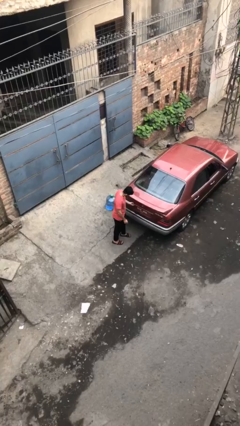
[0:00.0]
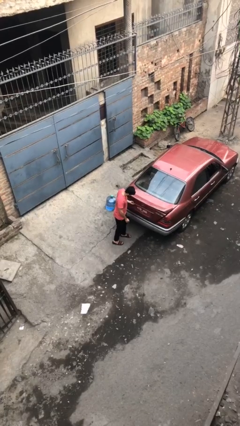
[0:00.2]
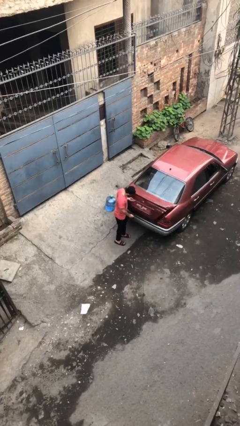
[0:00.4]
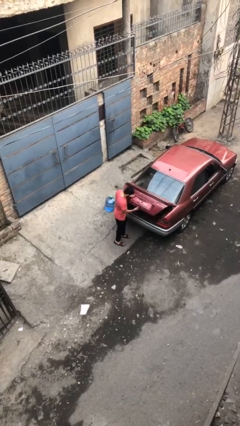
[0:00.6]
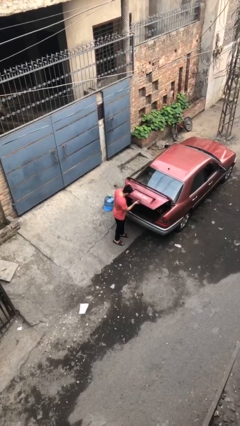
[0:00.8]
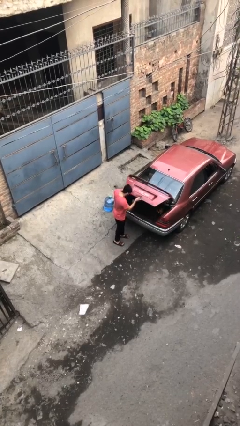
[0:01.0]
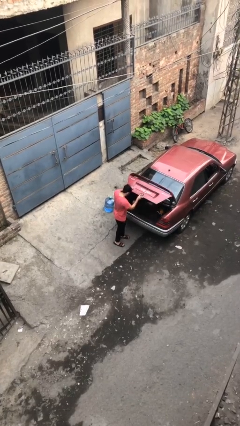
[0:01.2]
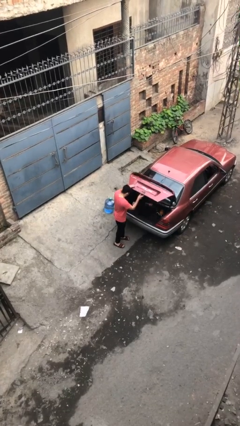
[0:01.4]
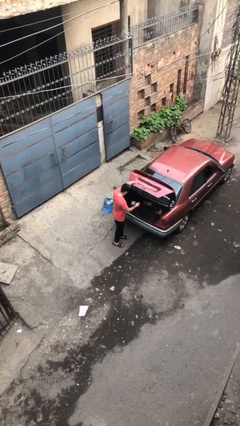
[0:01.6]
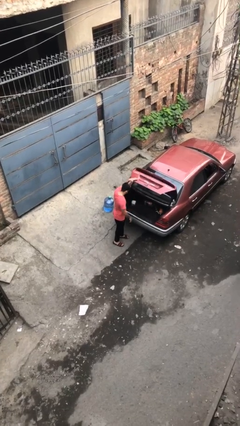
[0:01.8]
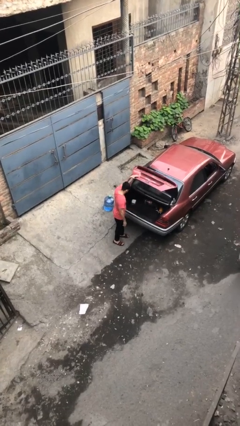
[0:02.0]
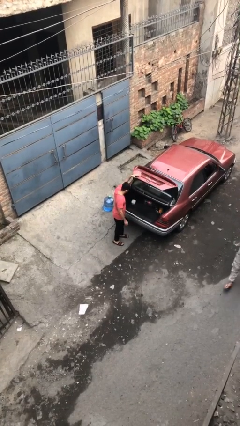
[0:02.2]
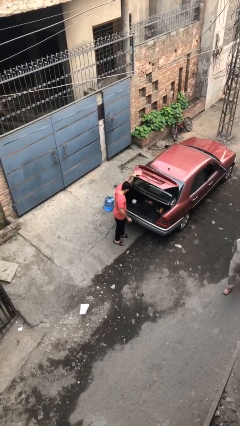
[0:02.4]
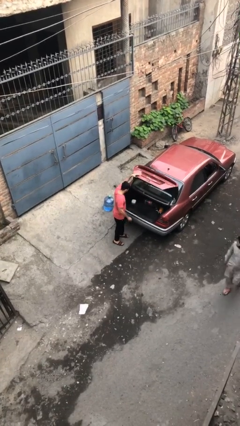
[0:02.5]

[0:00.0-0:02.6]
person opens car trunk

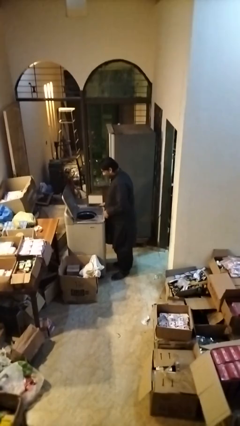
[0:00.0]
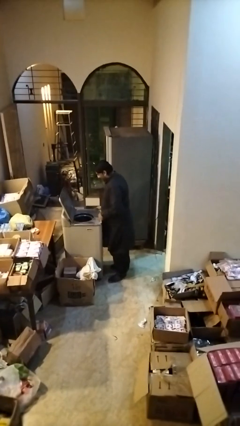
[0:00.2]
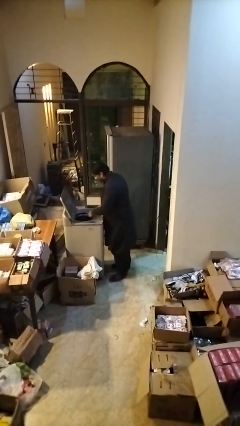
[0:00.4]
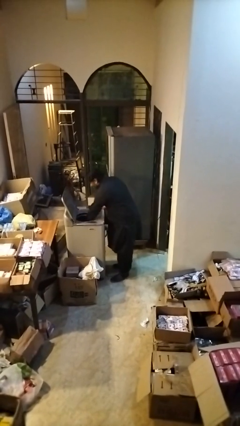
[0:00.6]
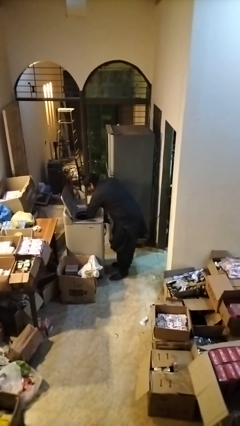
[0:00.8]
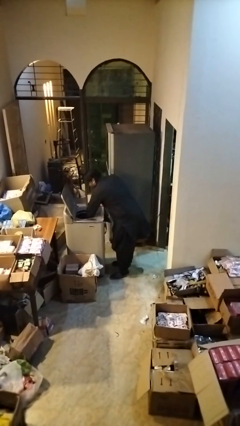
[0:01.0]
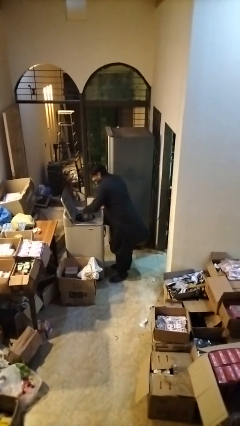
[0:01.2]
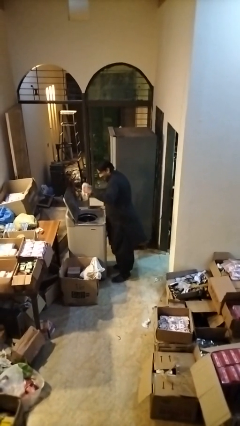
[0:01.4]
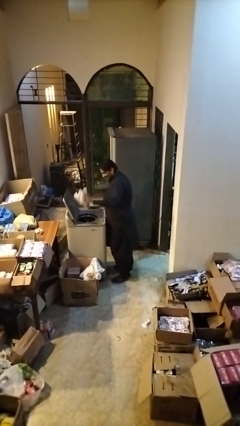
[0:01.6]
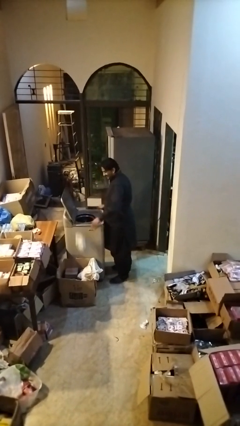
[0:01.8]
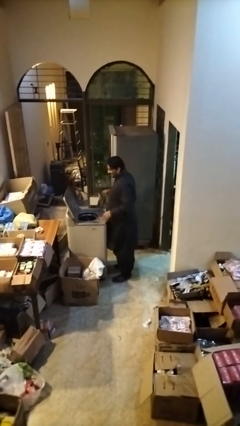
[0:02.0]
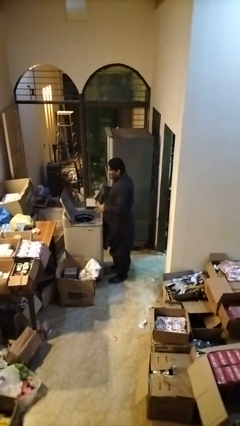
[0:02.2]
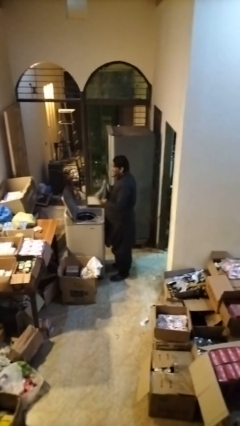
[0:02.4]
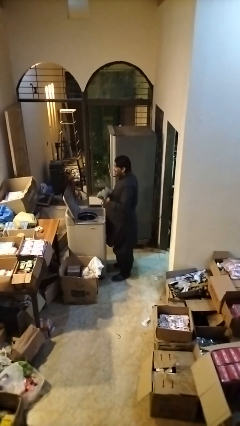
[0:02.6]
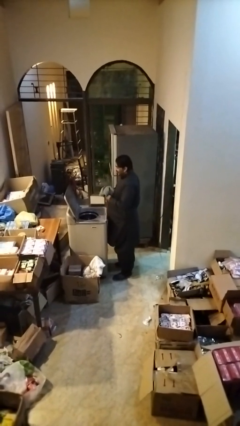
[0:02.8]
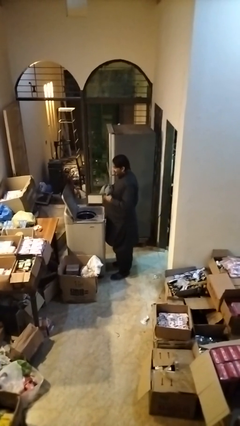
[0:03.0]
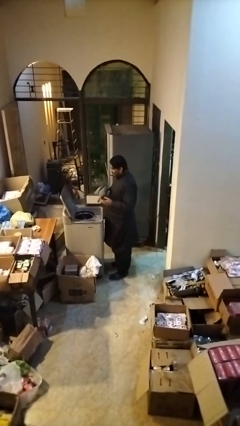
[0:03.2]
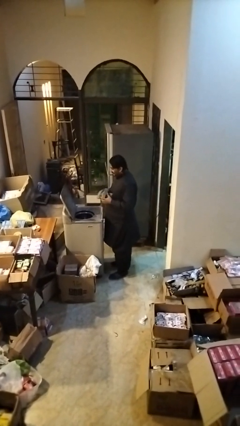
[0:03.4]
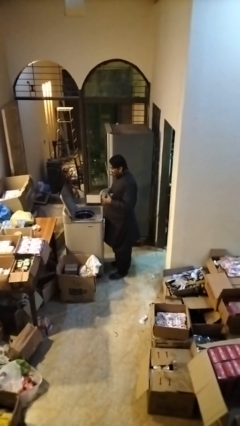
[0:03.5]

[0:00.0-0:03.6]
person unloads dryer

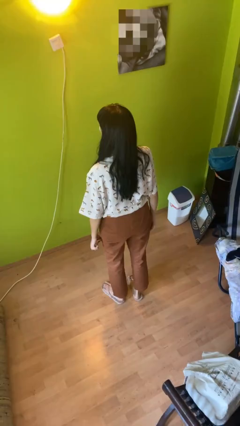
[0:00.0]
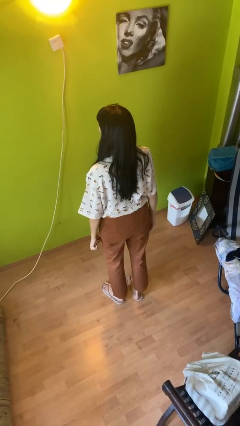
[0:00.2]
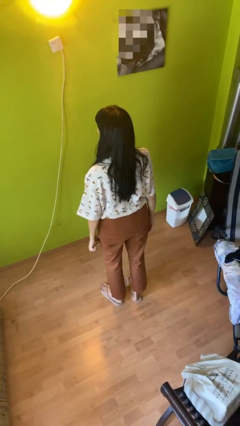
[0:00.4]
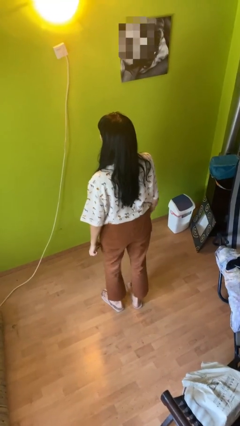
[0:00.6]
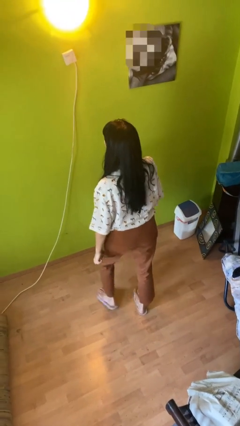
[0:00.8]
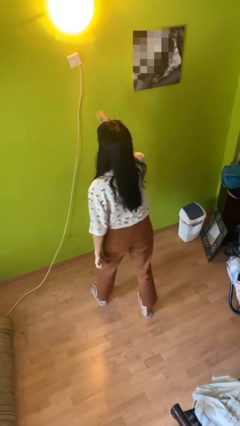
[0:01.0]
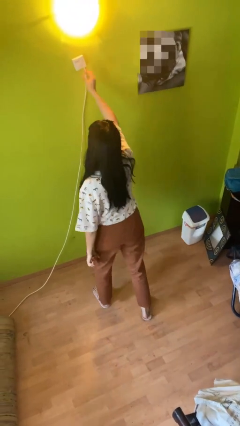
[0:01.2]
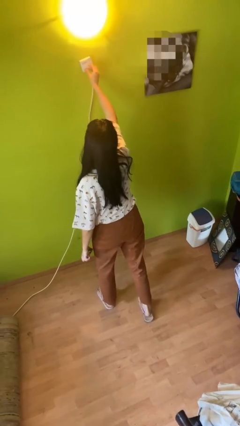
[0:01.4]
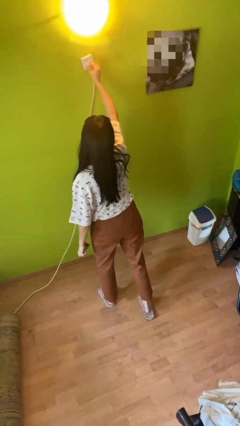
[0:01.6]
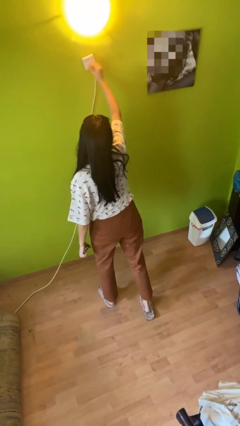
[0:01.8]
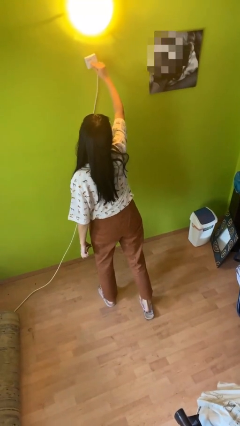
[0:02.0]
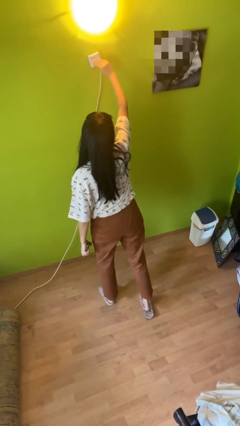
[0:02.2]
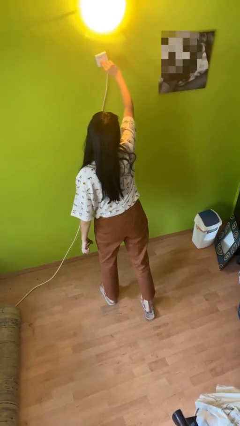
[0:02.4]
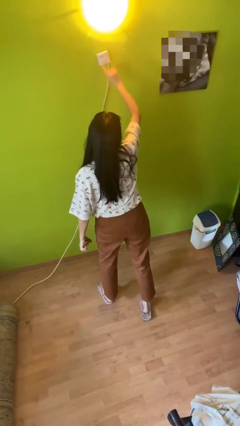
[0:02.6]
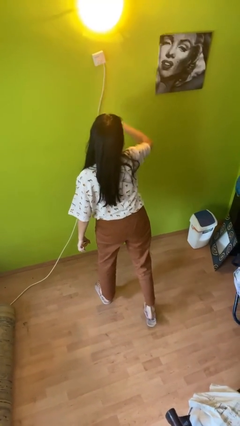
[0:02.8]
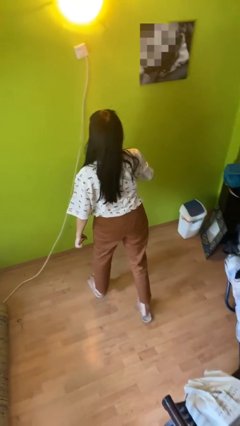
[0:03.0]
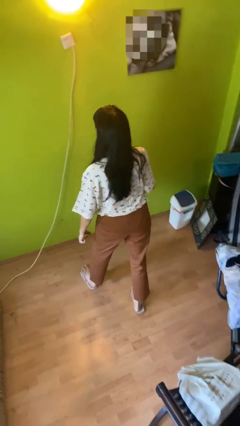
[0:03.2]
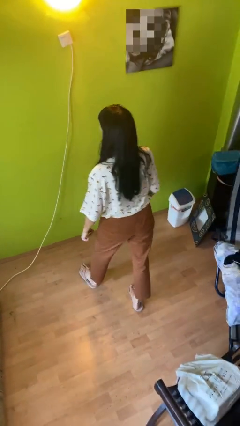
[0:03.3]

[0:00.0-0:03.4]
person adjusts thermostat

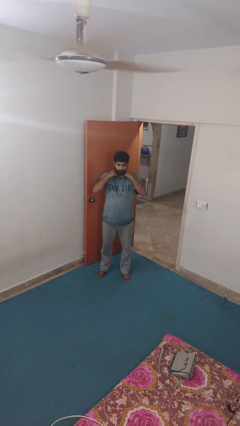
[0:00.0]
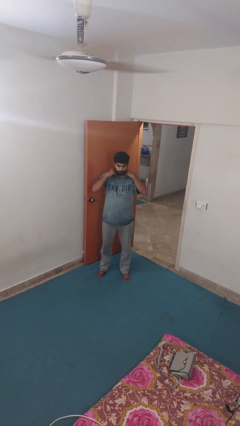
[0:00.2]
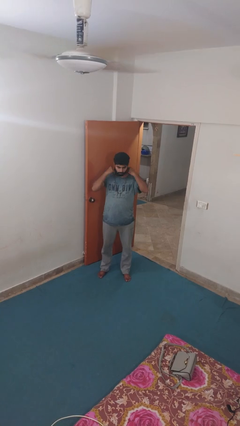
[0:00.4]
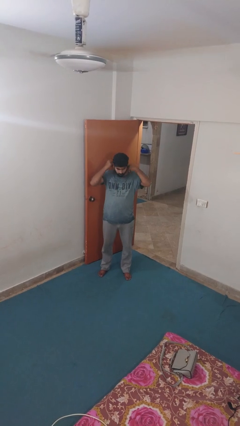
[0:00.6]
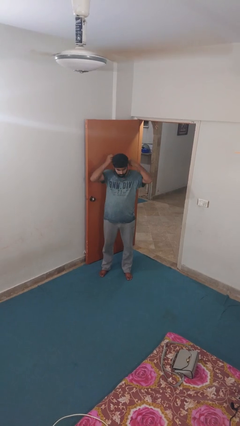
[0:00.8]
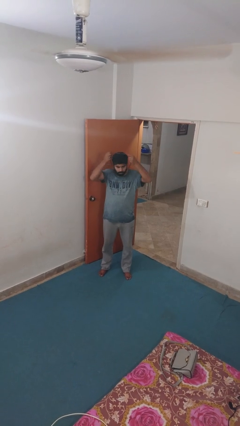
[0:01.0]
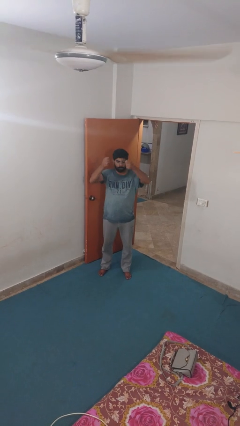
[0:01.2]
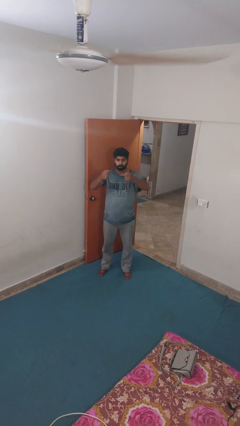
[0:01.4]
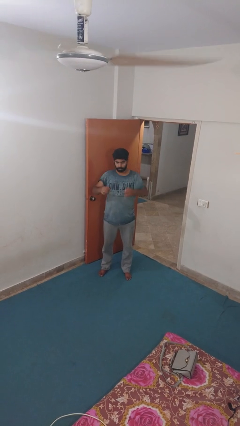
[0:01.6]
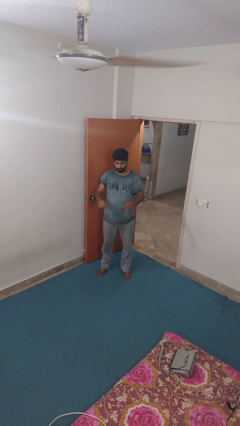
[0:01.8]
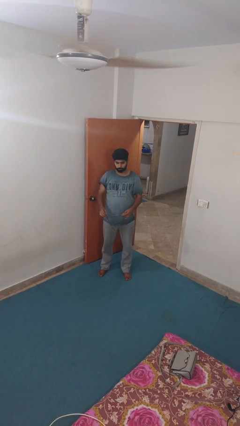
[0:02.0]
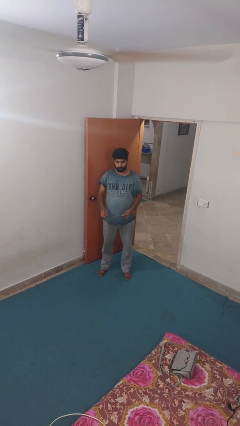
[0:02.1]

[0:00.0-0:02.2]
person takes off necklace

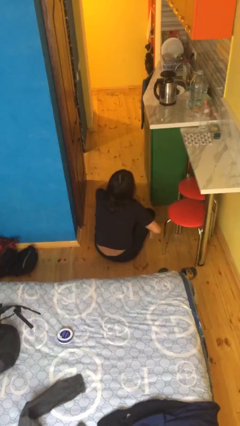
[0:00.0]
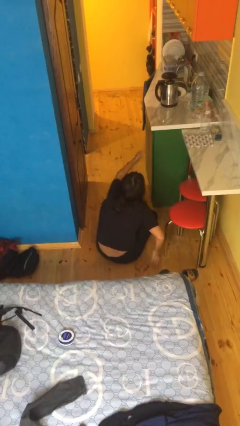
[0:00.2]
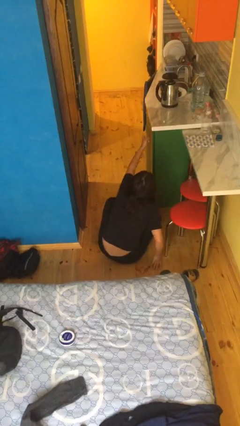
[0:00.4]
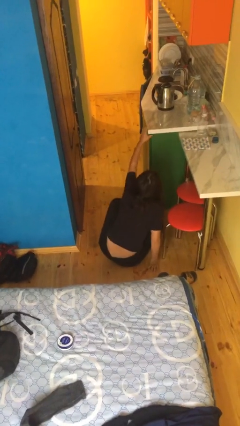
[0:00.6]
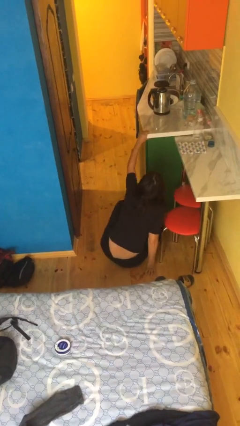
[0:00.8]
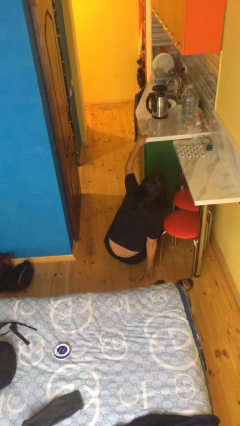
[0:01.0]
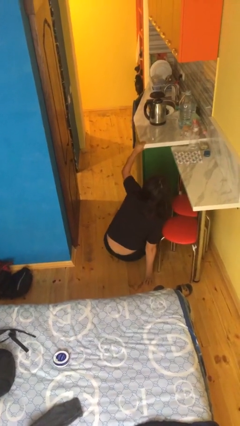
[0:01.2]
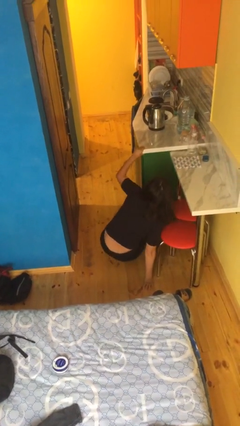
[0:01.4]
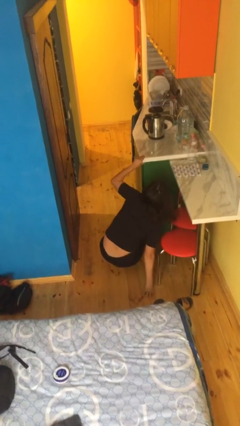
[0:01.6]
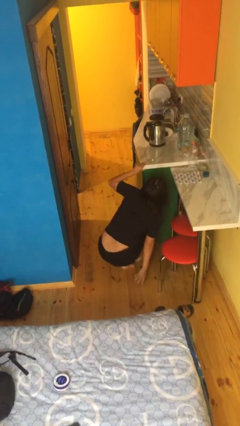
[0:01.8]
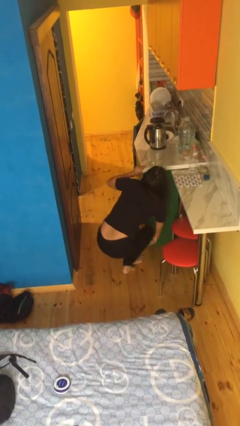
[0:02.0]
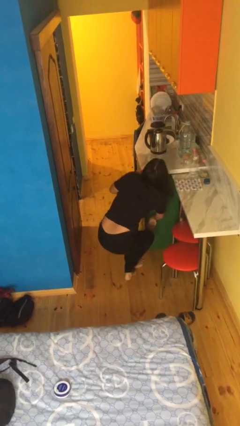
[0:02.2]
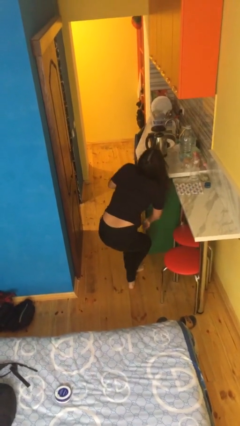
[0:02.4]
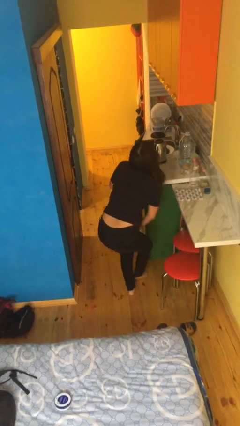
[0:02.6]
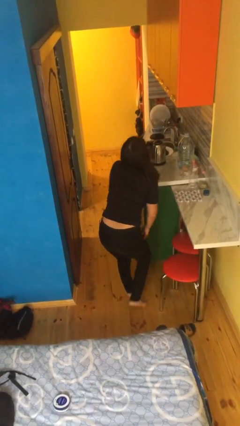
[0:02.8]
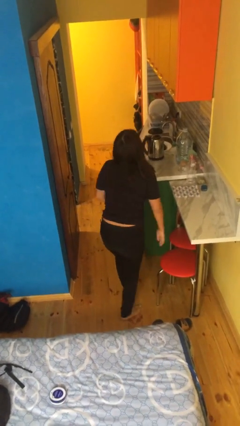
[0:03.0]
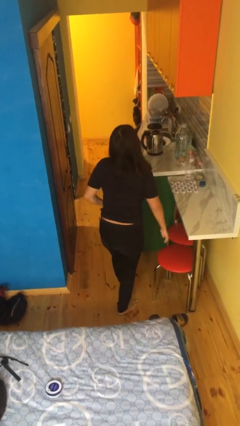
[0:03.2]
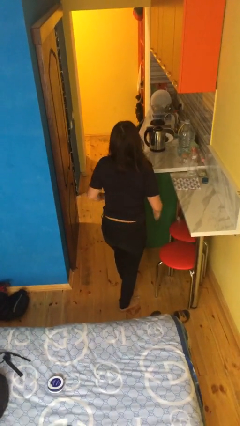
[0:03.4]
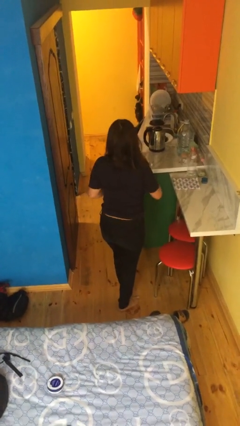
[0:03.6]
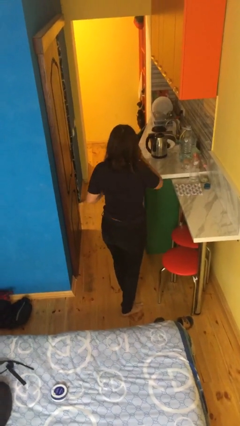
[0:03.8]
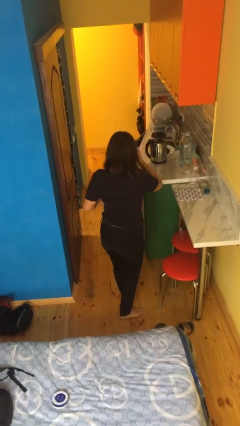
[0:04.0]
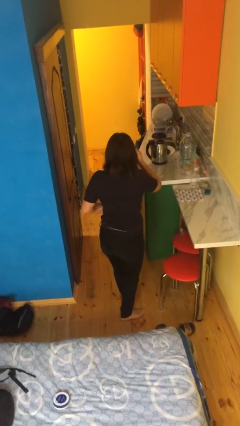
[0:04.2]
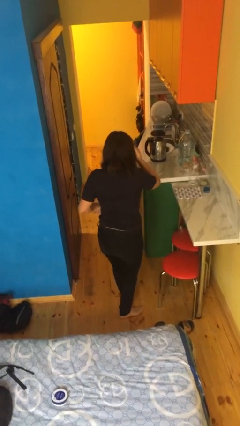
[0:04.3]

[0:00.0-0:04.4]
person stands up from floor

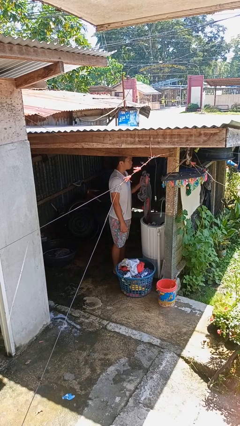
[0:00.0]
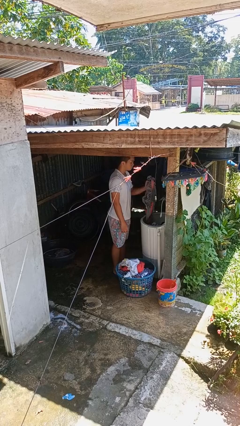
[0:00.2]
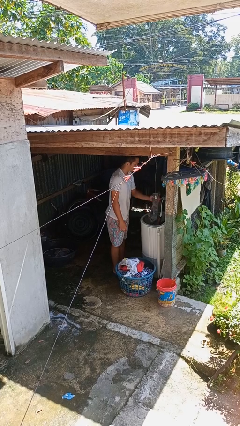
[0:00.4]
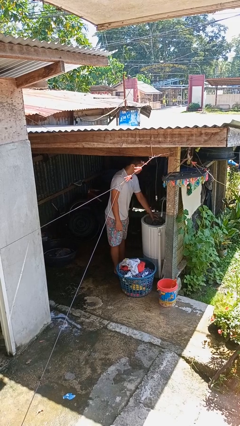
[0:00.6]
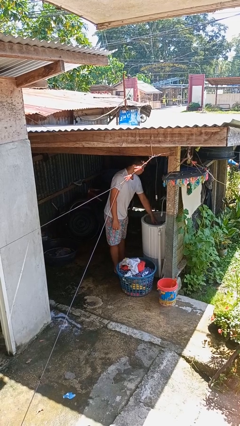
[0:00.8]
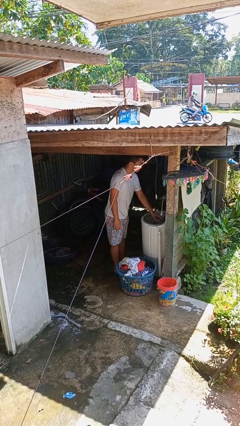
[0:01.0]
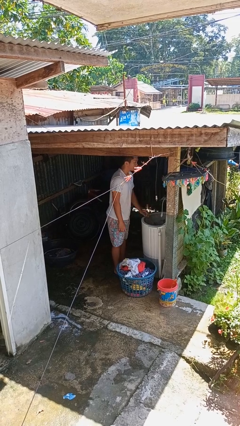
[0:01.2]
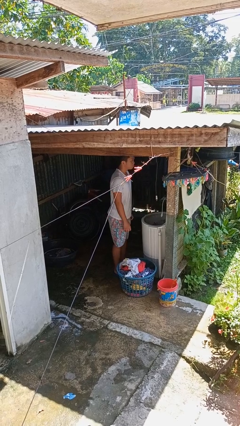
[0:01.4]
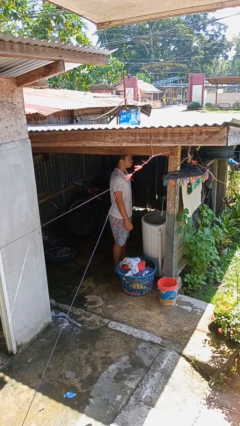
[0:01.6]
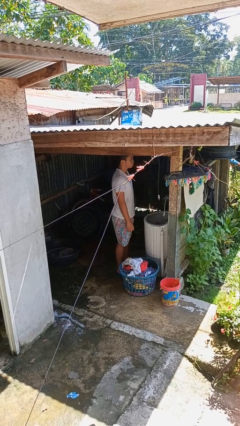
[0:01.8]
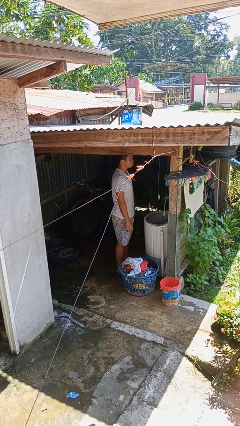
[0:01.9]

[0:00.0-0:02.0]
person loads clotheswasher
